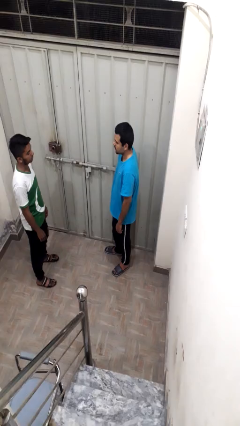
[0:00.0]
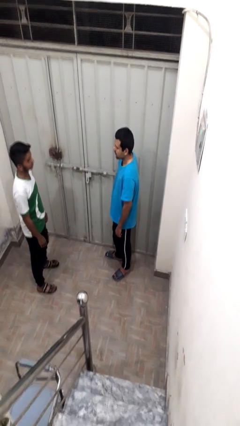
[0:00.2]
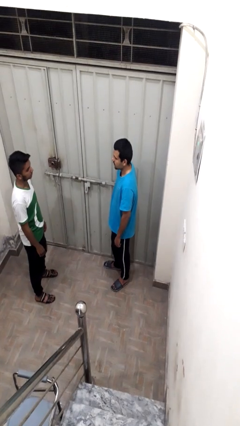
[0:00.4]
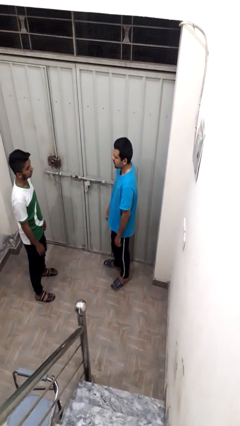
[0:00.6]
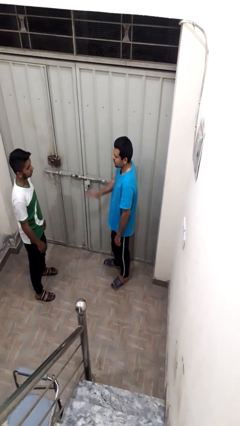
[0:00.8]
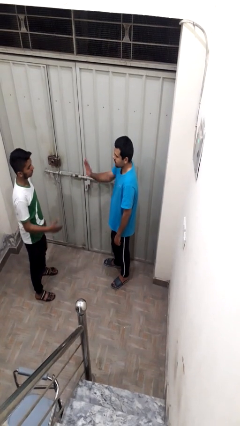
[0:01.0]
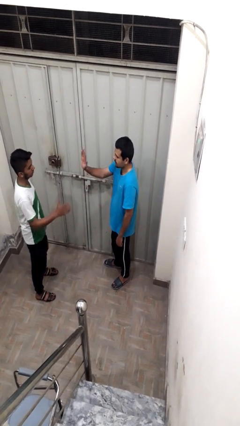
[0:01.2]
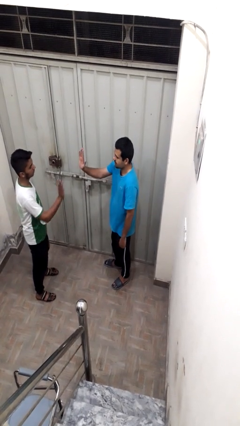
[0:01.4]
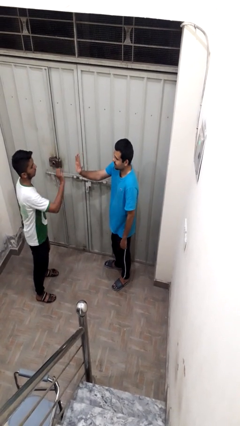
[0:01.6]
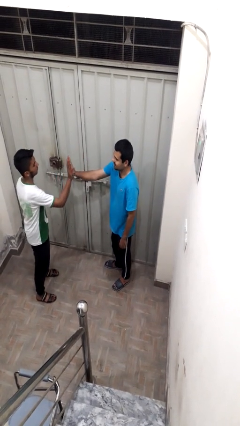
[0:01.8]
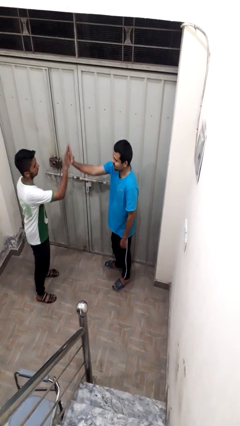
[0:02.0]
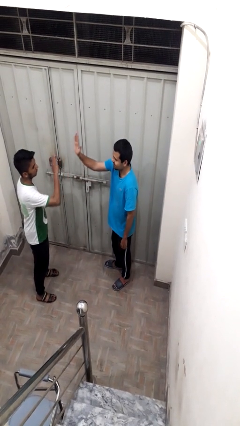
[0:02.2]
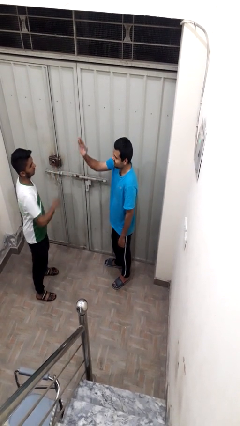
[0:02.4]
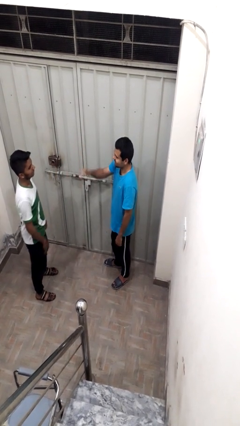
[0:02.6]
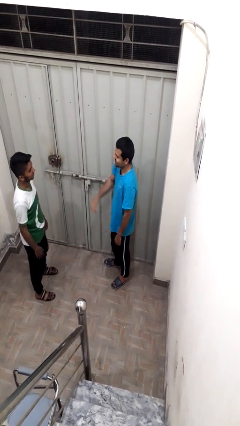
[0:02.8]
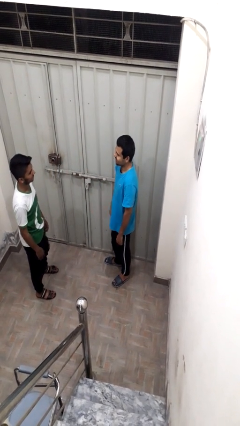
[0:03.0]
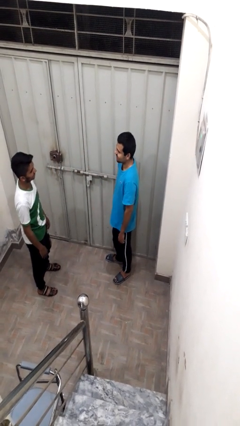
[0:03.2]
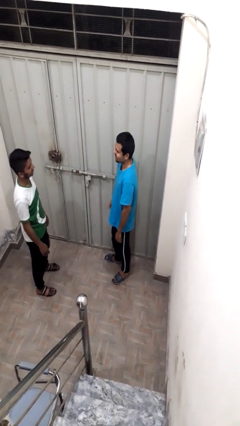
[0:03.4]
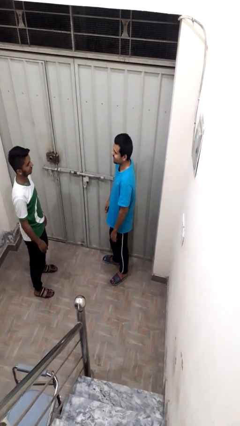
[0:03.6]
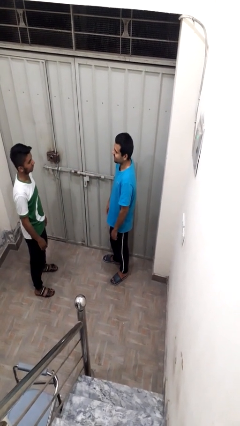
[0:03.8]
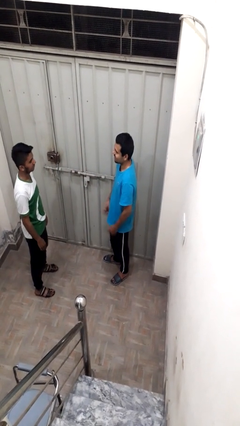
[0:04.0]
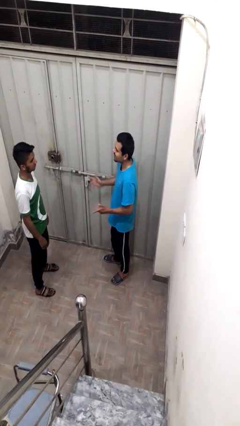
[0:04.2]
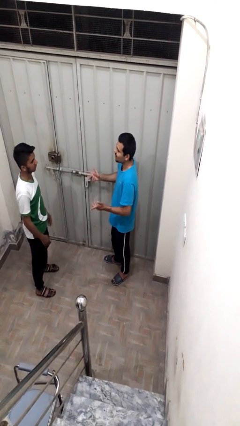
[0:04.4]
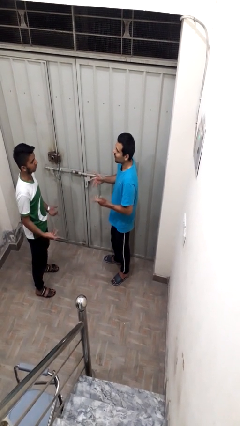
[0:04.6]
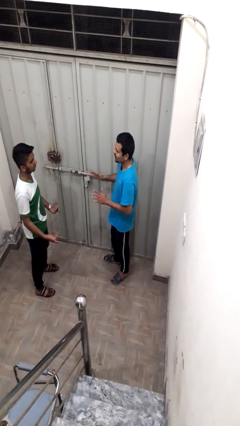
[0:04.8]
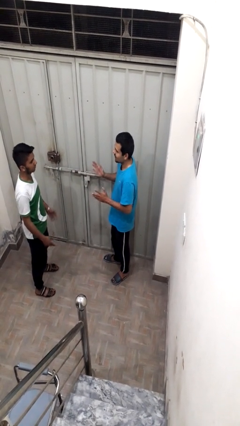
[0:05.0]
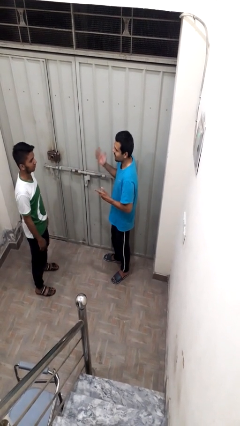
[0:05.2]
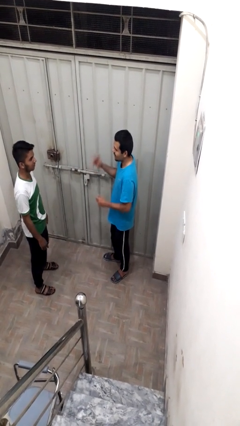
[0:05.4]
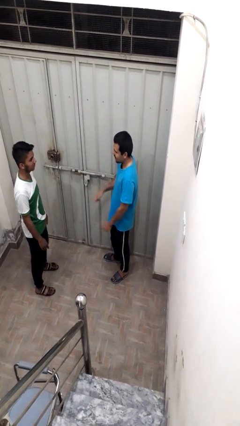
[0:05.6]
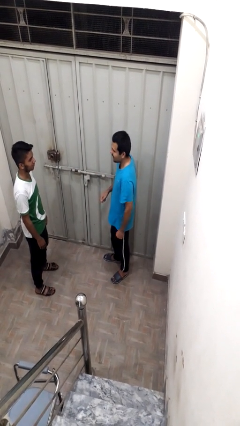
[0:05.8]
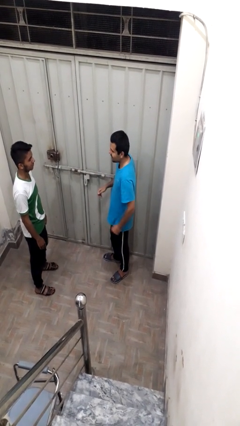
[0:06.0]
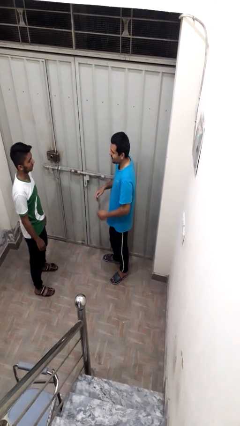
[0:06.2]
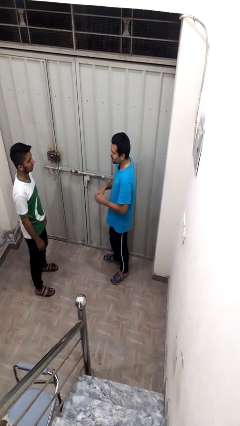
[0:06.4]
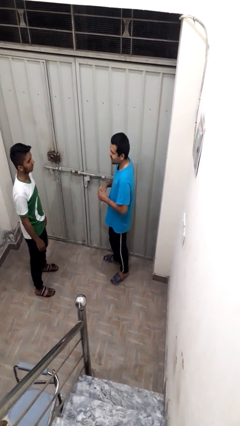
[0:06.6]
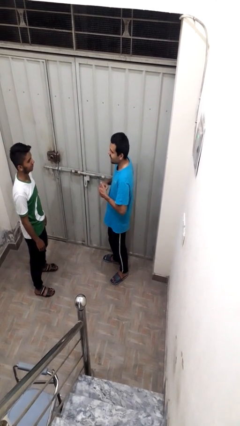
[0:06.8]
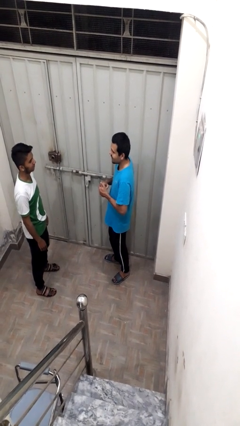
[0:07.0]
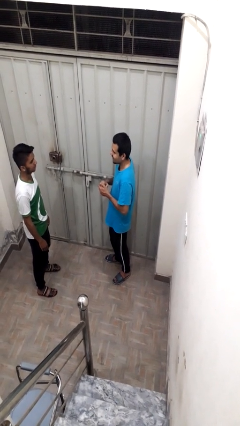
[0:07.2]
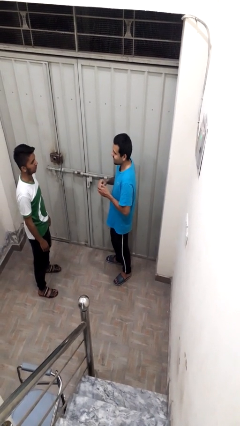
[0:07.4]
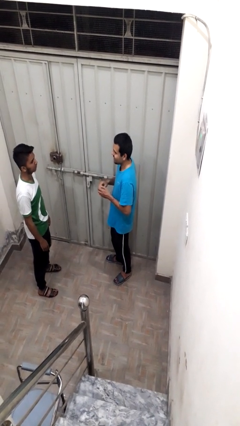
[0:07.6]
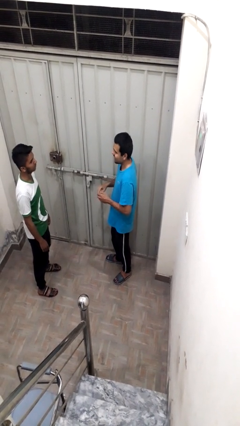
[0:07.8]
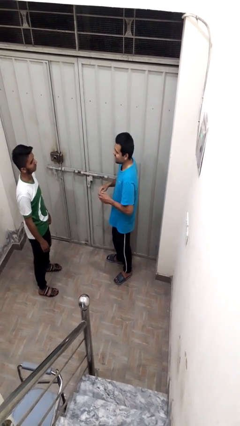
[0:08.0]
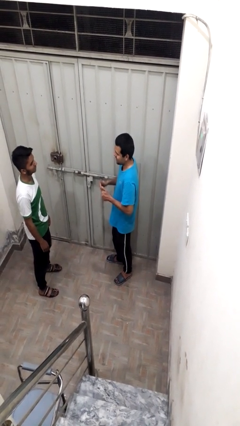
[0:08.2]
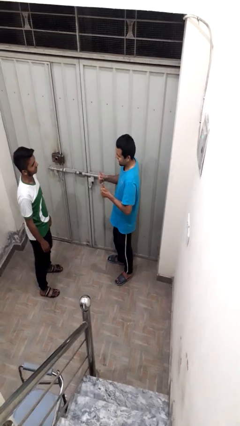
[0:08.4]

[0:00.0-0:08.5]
person highfives hand

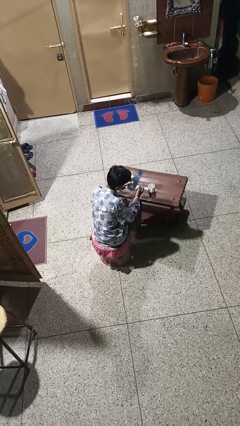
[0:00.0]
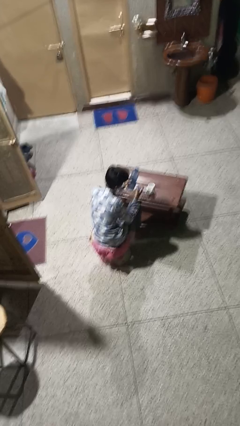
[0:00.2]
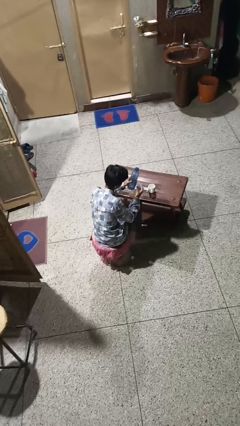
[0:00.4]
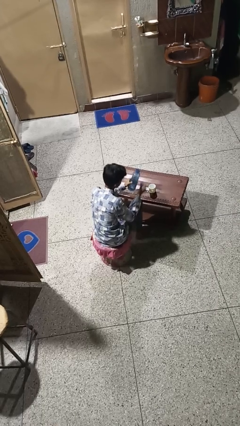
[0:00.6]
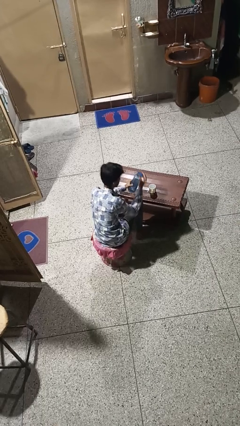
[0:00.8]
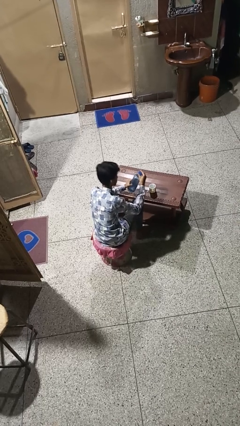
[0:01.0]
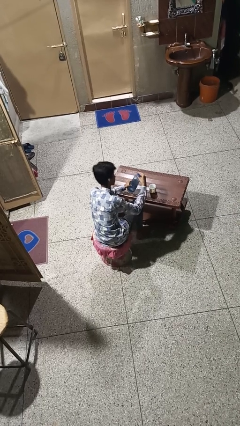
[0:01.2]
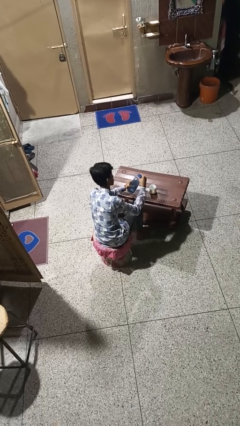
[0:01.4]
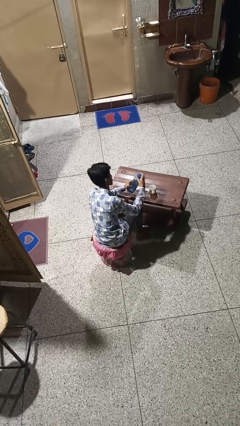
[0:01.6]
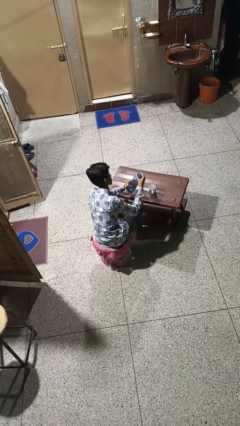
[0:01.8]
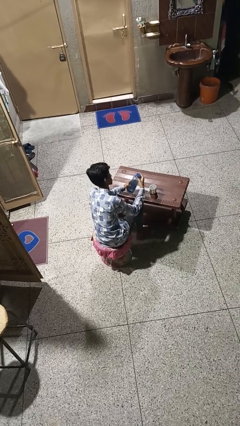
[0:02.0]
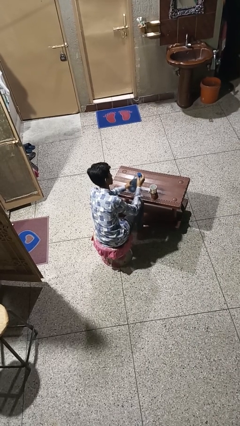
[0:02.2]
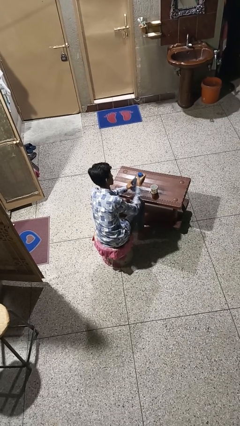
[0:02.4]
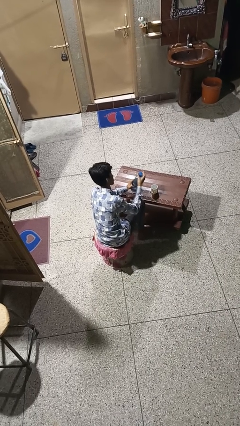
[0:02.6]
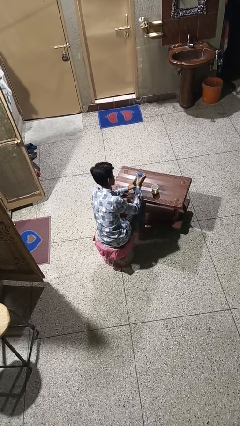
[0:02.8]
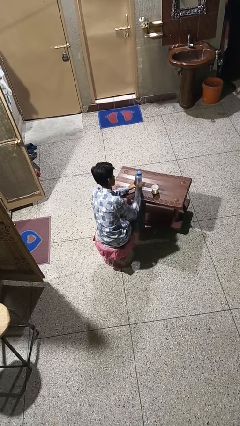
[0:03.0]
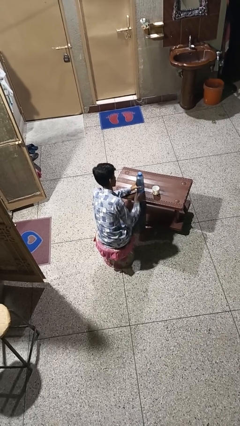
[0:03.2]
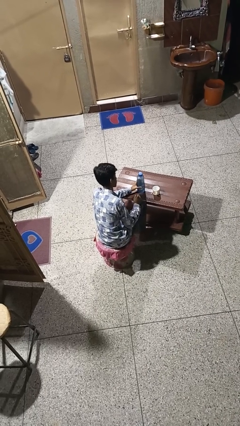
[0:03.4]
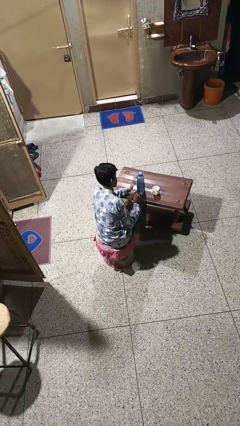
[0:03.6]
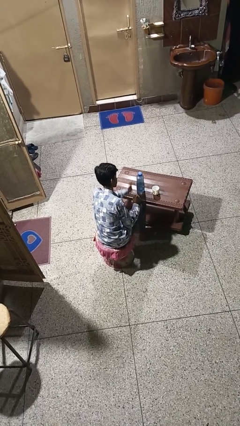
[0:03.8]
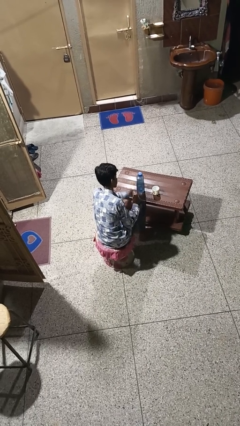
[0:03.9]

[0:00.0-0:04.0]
person screws lid to bottle

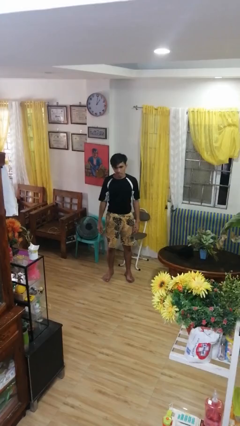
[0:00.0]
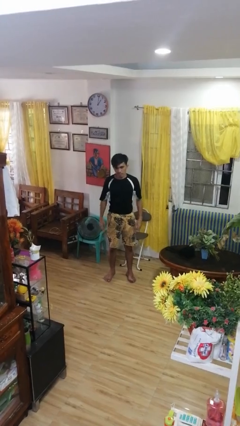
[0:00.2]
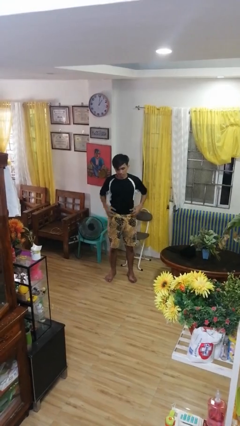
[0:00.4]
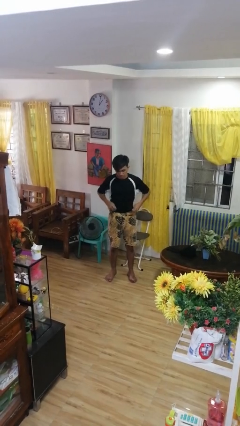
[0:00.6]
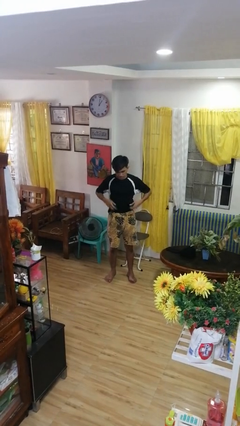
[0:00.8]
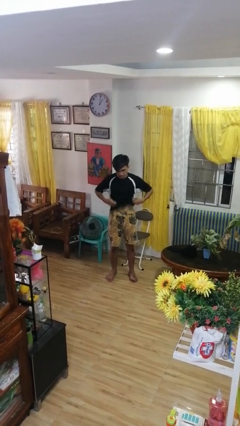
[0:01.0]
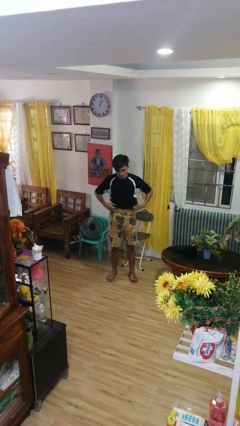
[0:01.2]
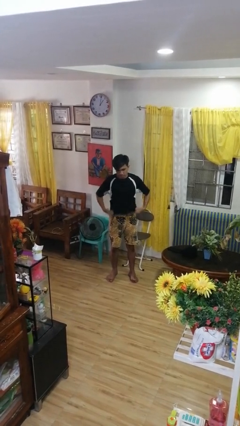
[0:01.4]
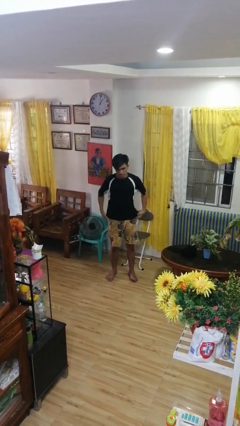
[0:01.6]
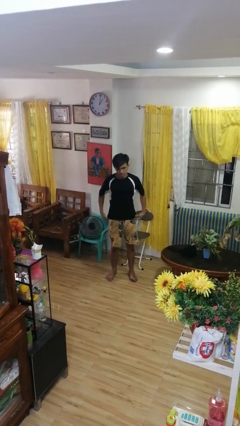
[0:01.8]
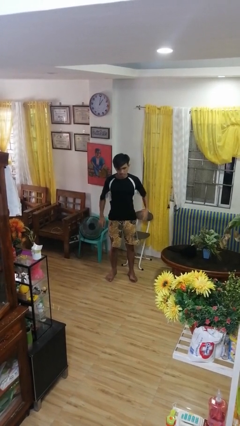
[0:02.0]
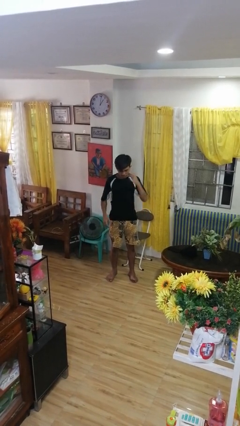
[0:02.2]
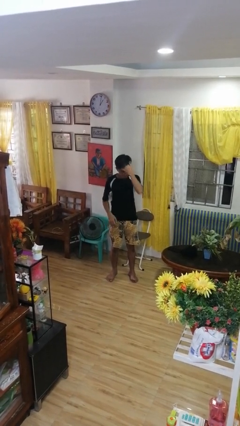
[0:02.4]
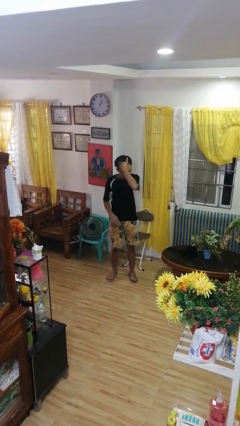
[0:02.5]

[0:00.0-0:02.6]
person untucks shirt

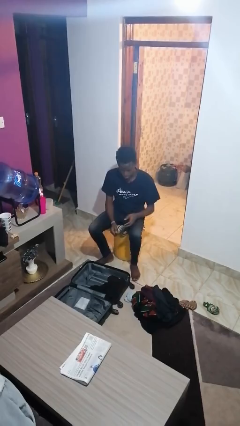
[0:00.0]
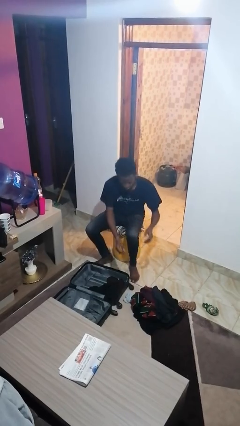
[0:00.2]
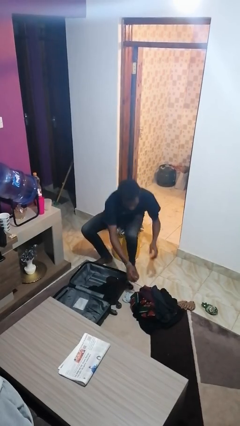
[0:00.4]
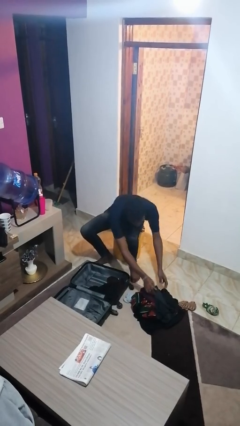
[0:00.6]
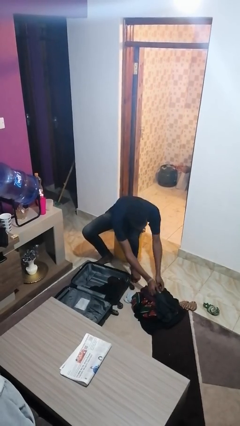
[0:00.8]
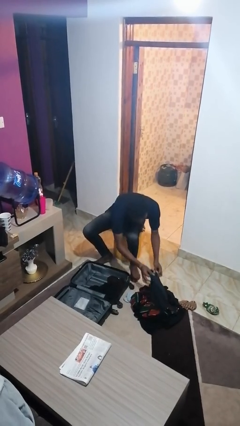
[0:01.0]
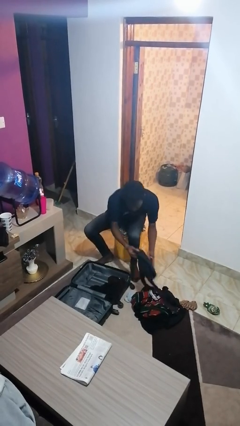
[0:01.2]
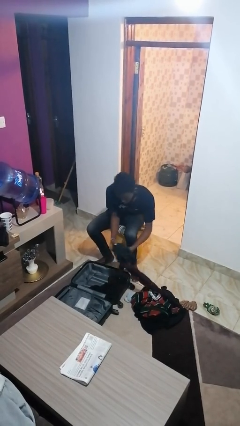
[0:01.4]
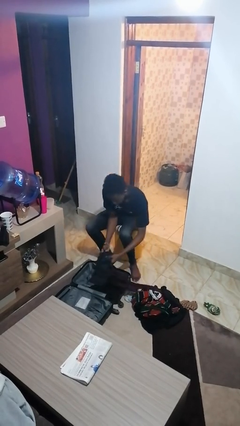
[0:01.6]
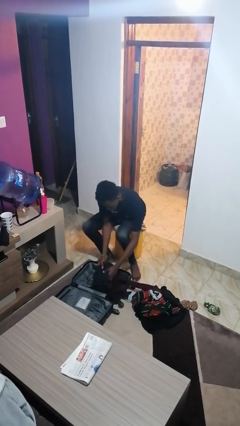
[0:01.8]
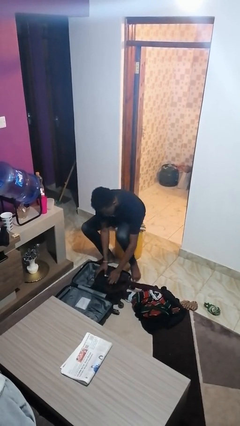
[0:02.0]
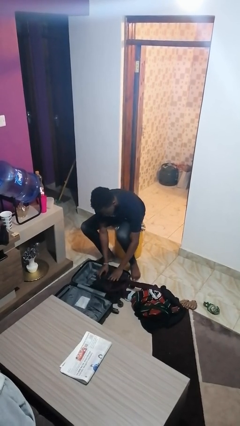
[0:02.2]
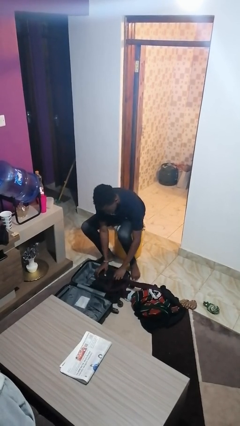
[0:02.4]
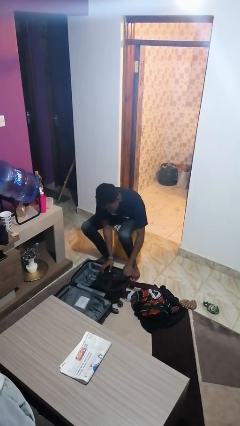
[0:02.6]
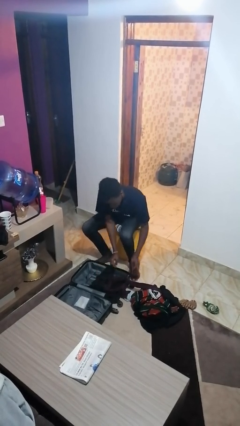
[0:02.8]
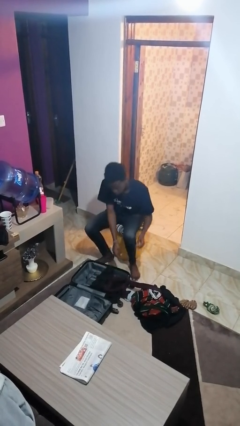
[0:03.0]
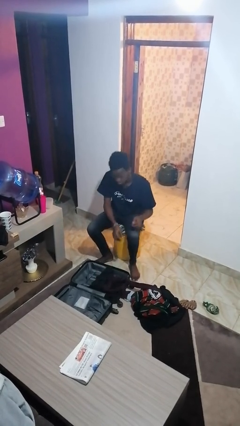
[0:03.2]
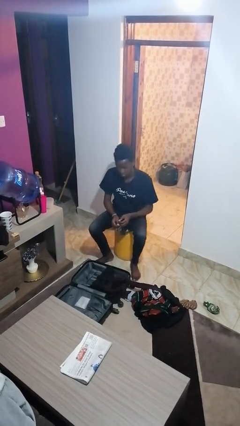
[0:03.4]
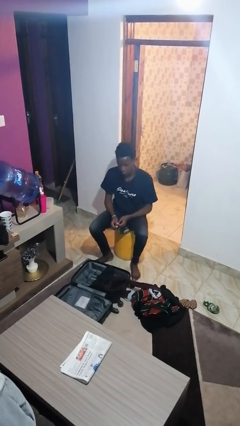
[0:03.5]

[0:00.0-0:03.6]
person loads clothes into suitcase
